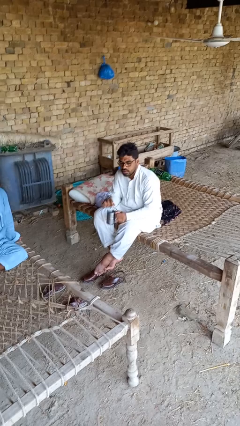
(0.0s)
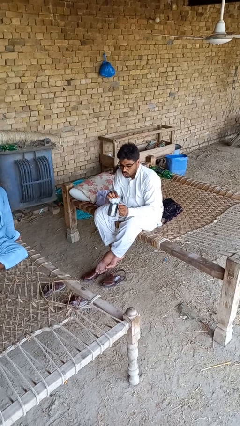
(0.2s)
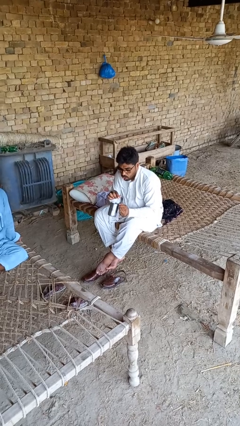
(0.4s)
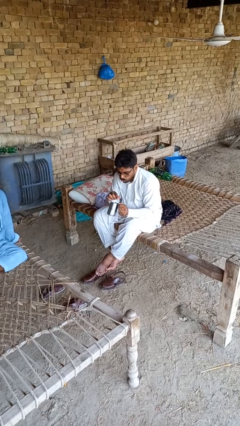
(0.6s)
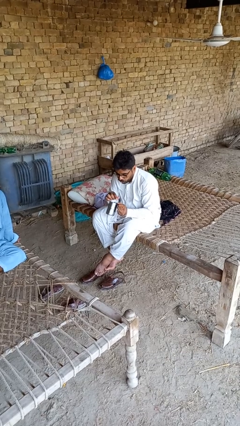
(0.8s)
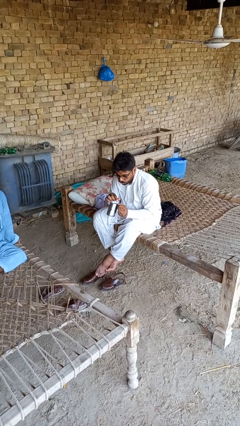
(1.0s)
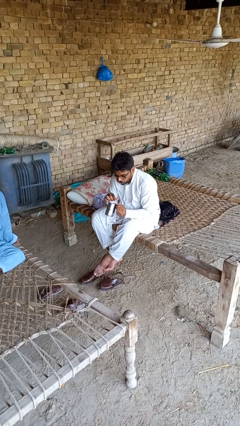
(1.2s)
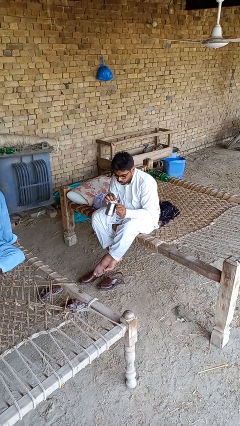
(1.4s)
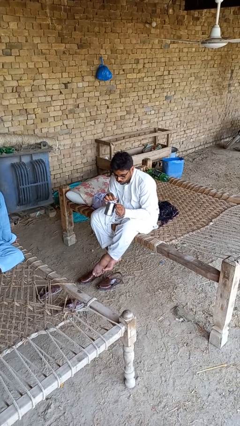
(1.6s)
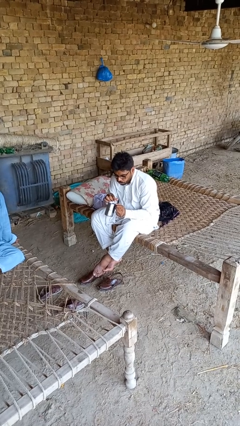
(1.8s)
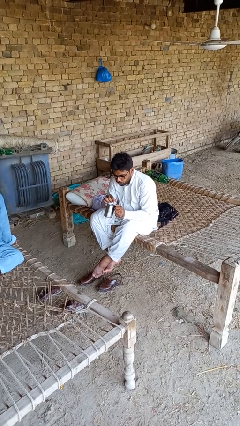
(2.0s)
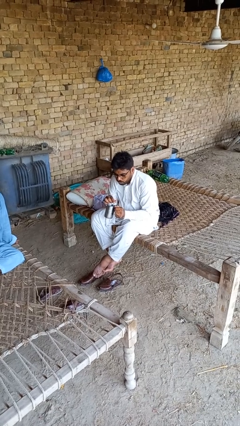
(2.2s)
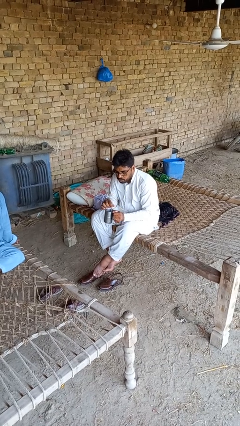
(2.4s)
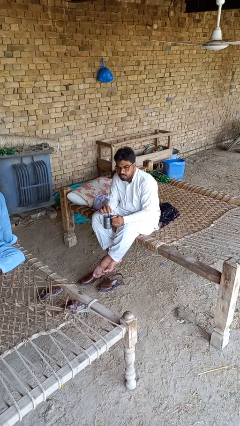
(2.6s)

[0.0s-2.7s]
person drinks from straw

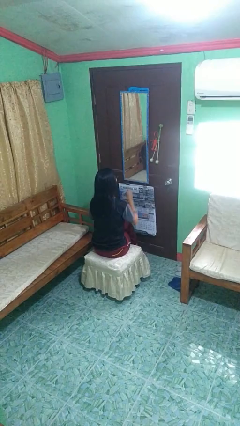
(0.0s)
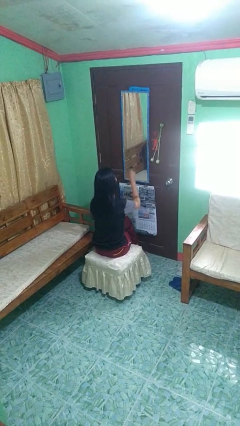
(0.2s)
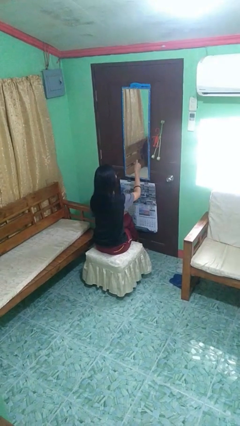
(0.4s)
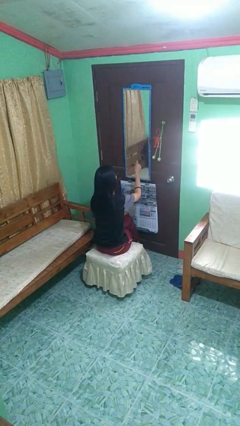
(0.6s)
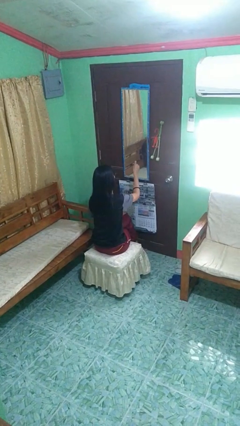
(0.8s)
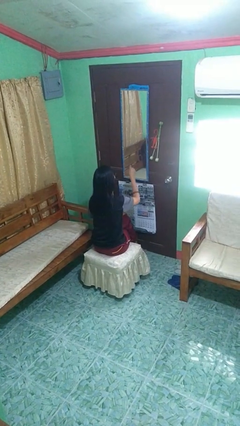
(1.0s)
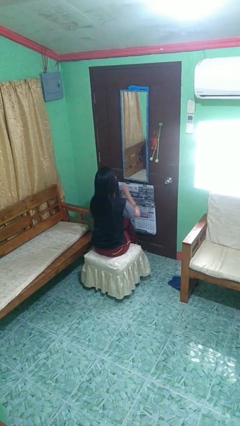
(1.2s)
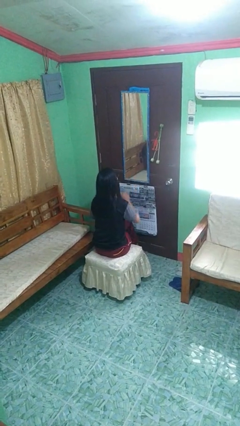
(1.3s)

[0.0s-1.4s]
person gestures thumbs up

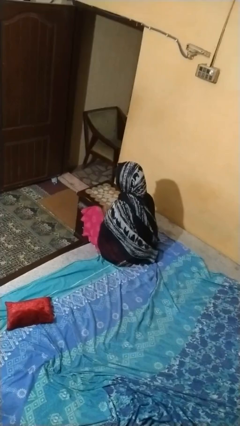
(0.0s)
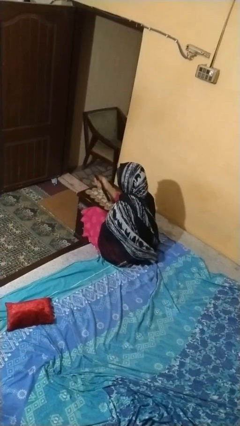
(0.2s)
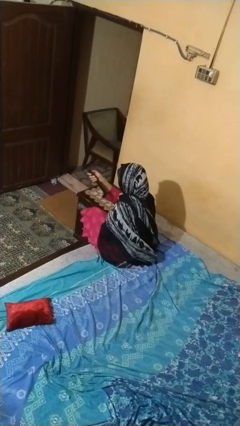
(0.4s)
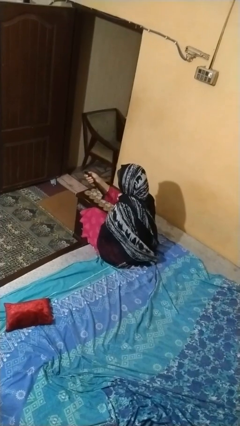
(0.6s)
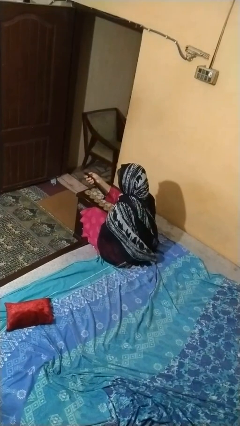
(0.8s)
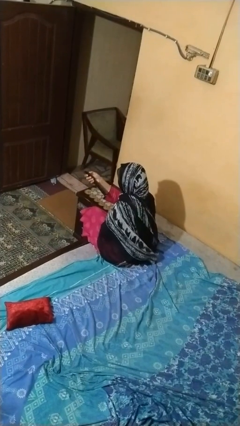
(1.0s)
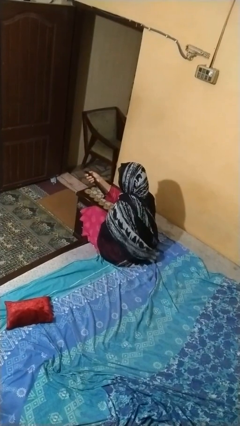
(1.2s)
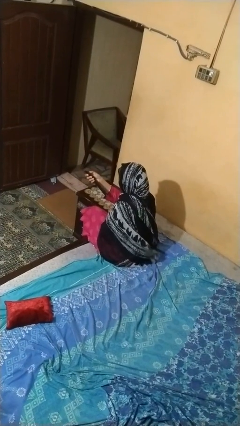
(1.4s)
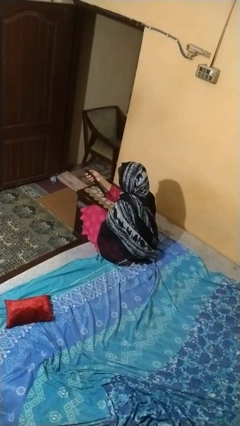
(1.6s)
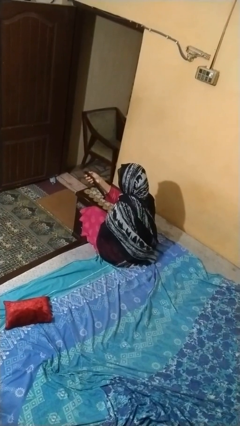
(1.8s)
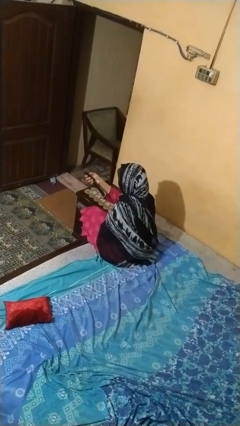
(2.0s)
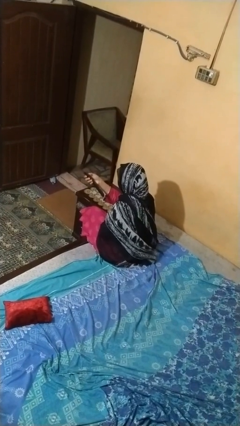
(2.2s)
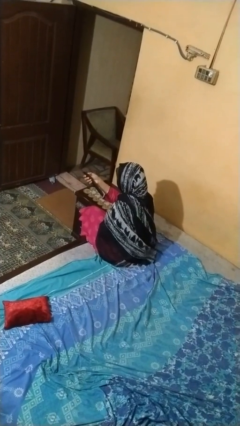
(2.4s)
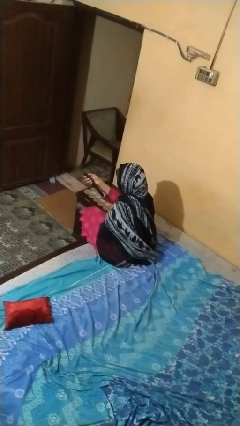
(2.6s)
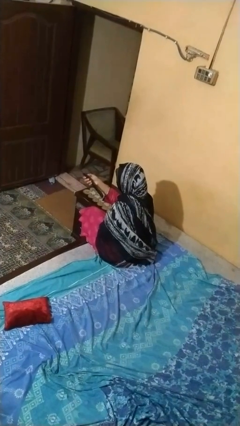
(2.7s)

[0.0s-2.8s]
person uses television remote

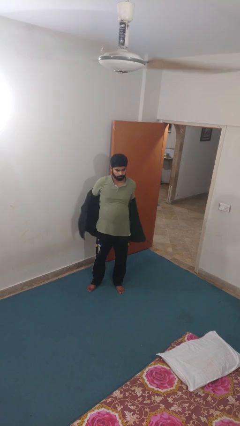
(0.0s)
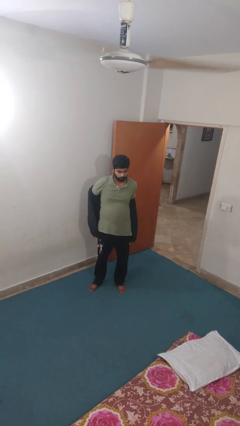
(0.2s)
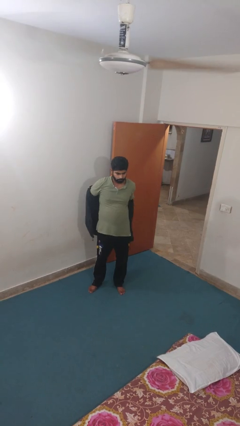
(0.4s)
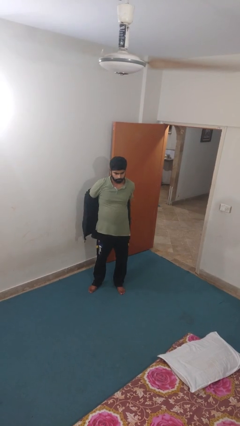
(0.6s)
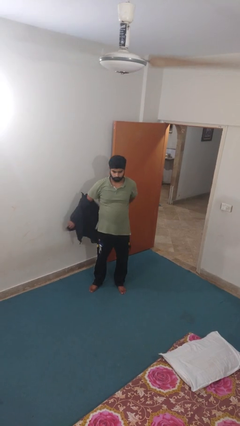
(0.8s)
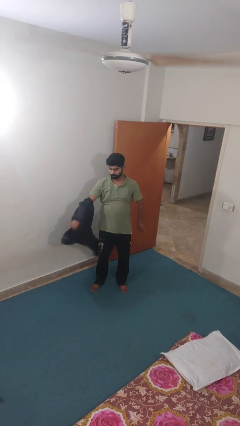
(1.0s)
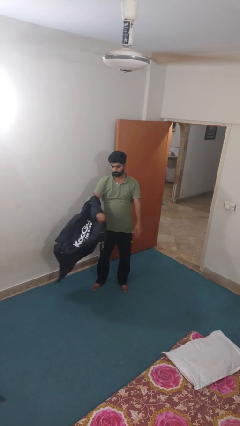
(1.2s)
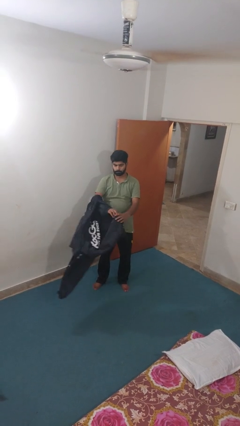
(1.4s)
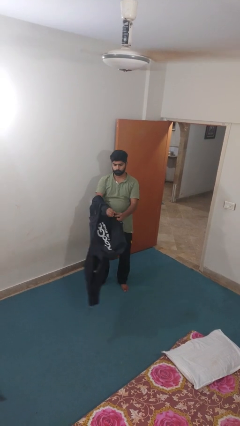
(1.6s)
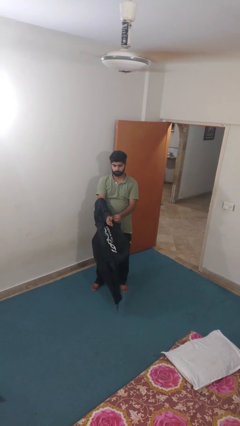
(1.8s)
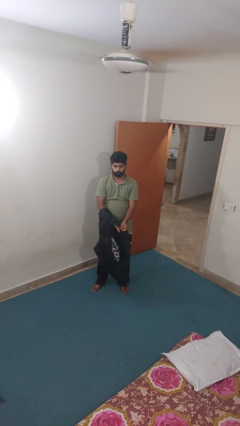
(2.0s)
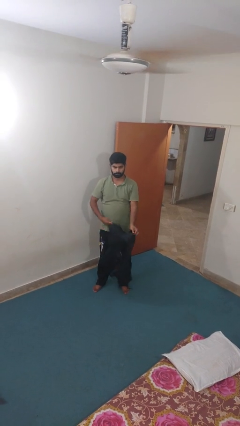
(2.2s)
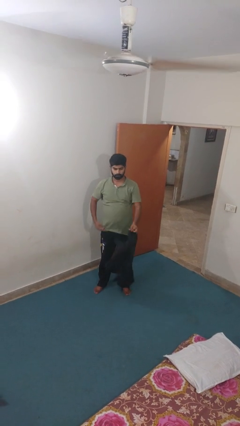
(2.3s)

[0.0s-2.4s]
person takes off jacket

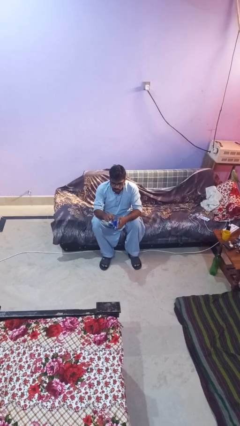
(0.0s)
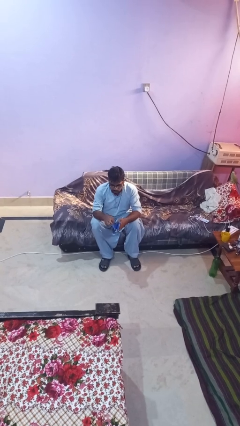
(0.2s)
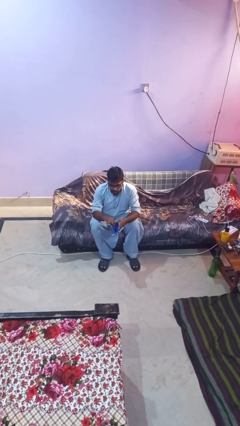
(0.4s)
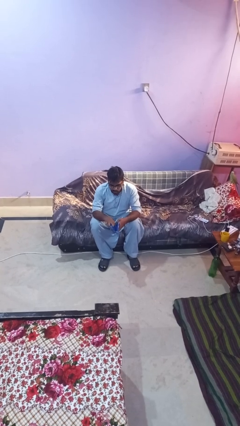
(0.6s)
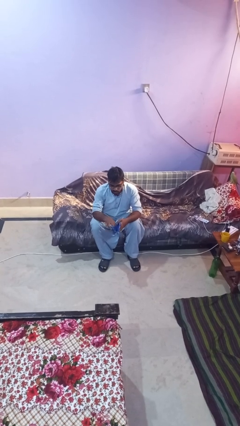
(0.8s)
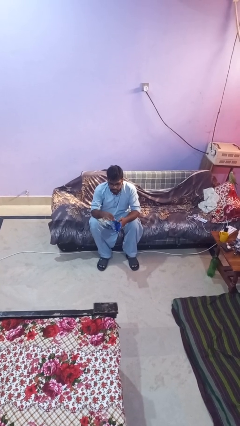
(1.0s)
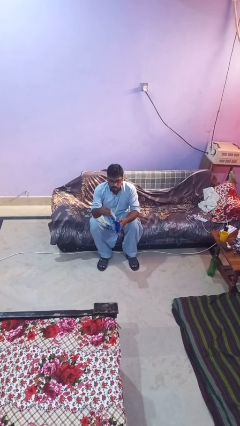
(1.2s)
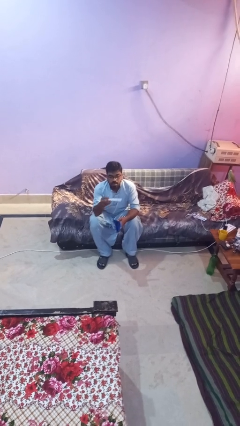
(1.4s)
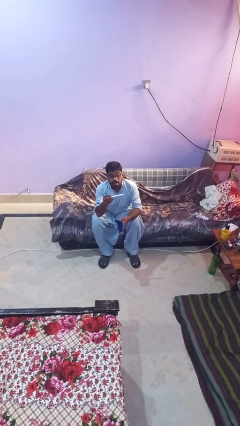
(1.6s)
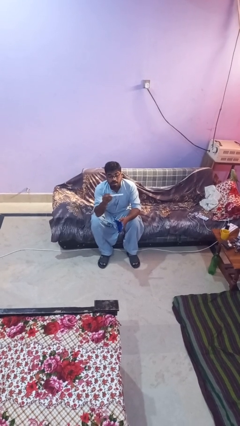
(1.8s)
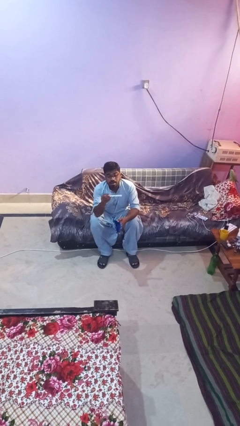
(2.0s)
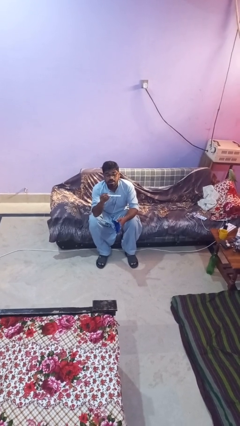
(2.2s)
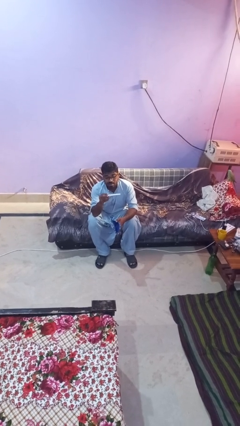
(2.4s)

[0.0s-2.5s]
person takes object from purse

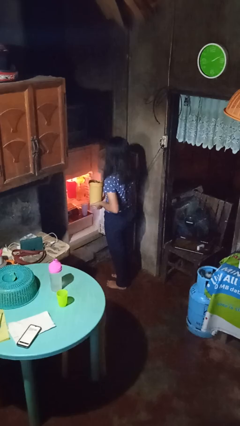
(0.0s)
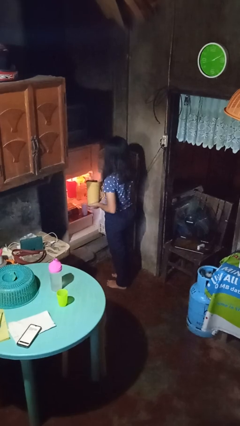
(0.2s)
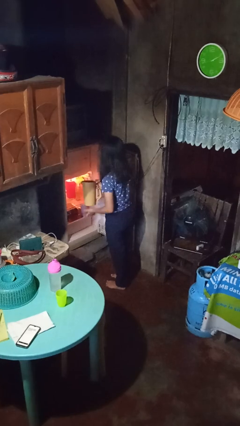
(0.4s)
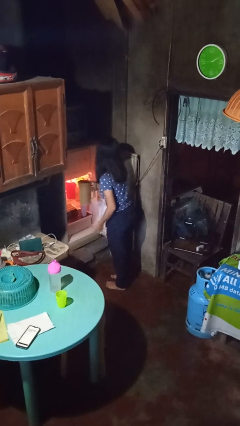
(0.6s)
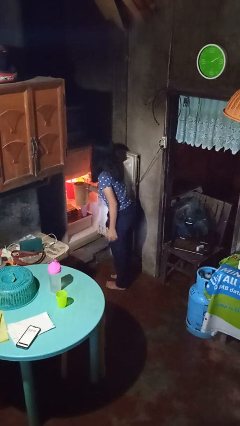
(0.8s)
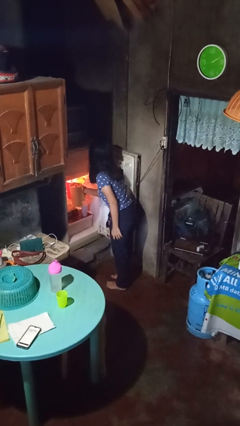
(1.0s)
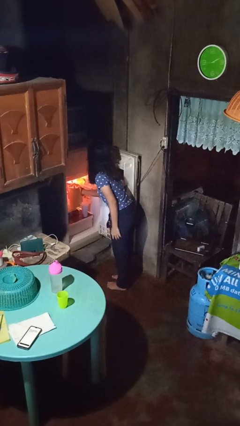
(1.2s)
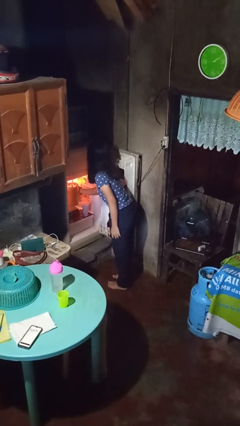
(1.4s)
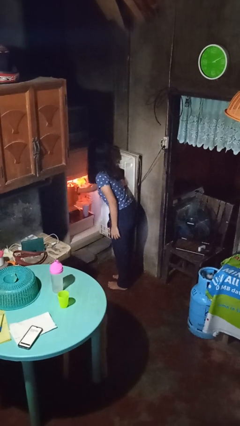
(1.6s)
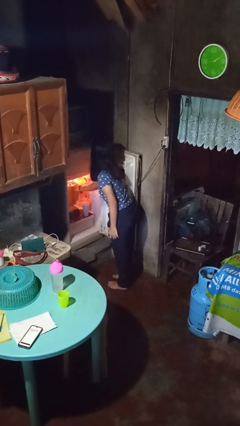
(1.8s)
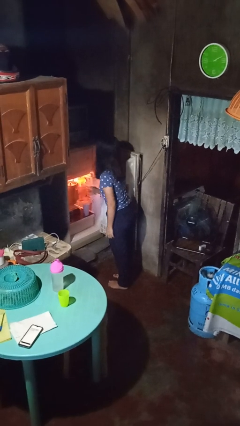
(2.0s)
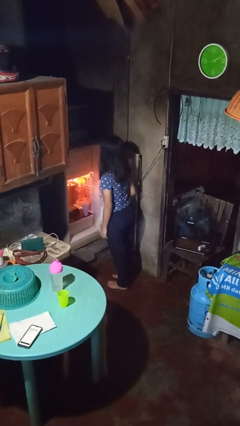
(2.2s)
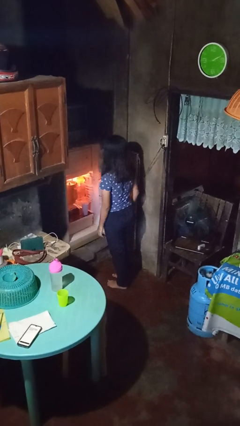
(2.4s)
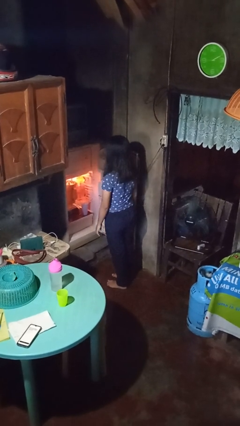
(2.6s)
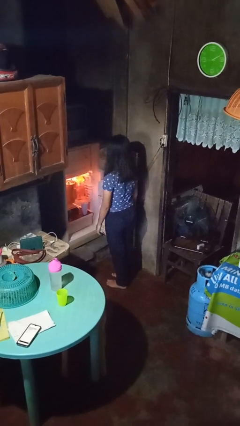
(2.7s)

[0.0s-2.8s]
person puts object into refrigerator

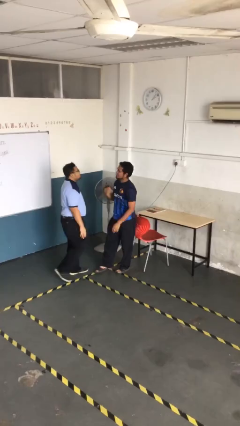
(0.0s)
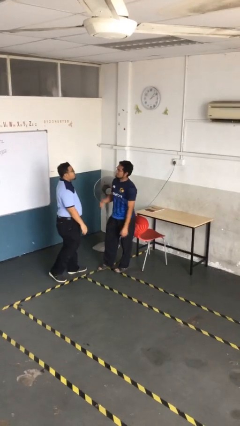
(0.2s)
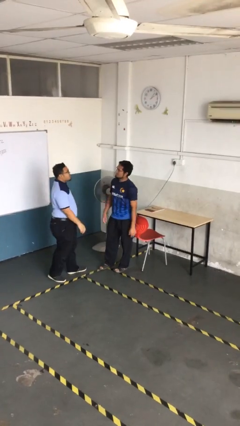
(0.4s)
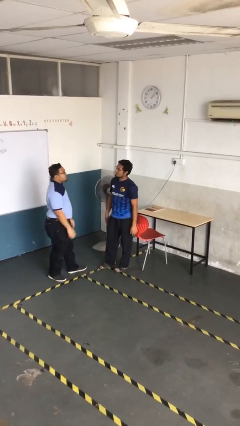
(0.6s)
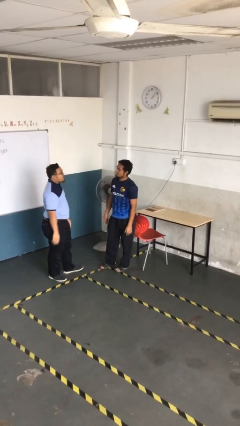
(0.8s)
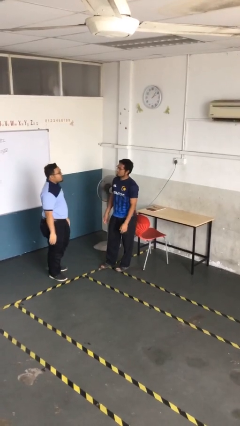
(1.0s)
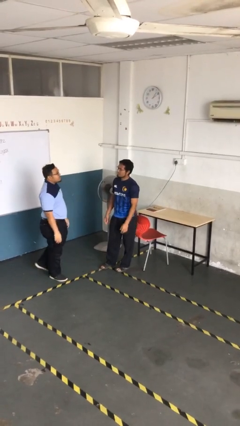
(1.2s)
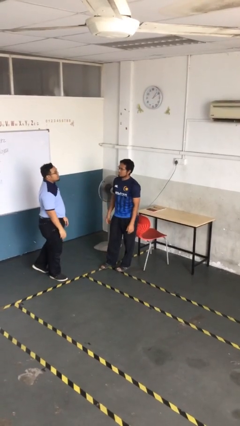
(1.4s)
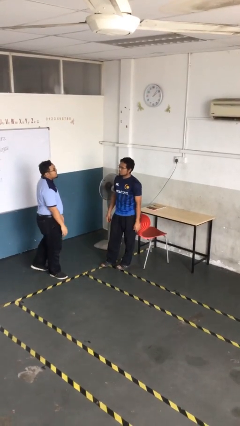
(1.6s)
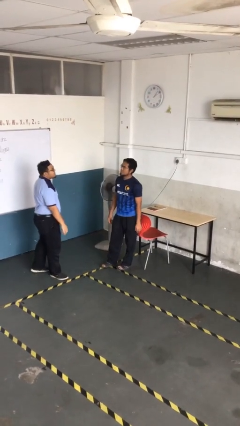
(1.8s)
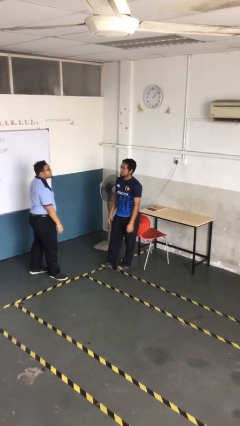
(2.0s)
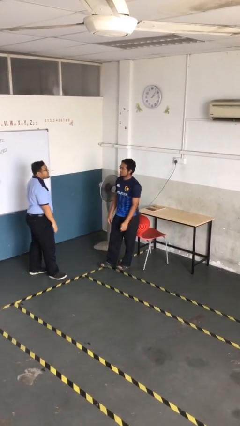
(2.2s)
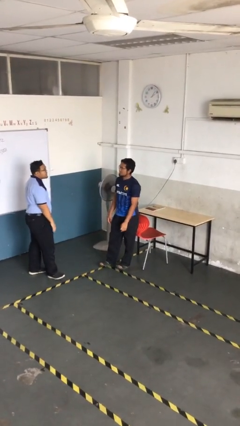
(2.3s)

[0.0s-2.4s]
person talks to person

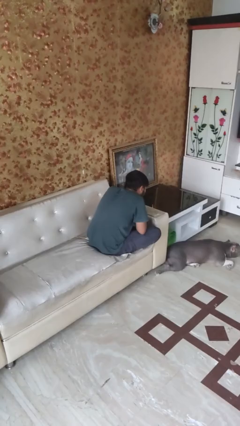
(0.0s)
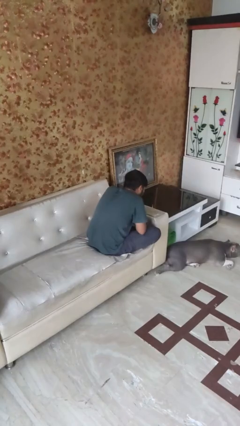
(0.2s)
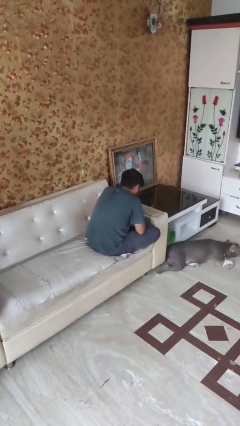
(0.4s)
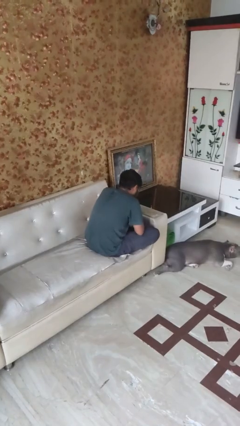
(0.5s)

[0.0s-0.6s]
person extinguishes candle
